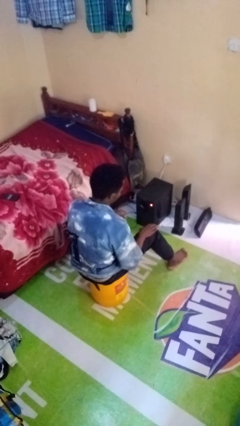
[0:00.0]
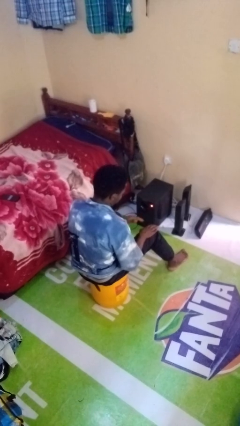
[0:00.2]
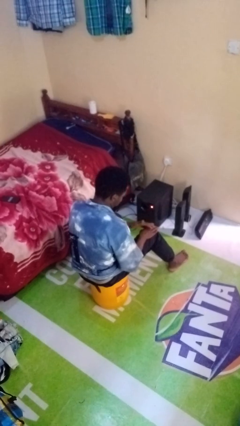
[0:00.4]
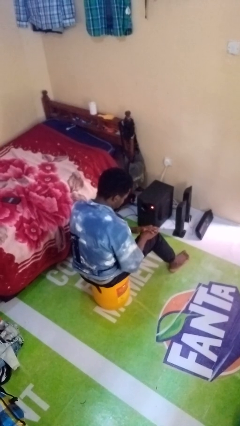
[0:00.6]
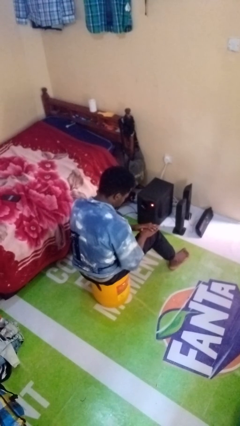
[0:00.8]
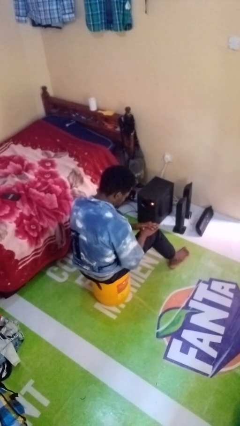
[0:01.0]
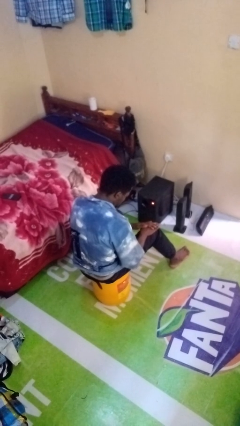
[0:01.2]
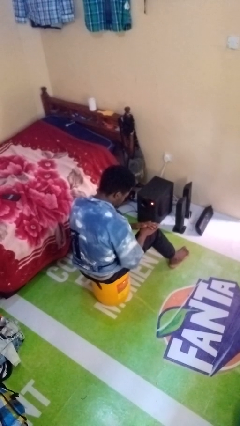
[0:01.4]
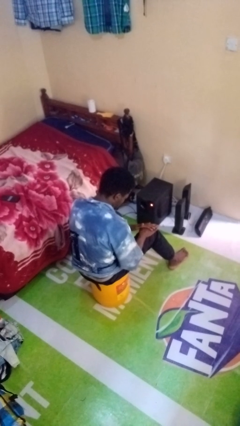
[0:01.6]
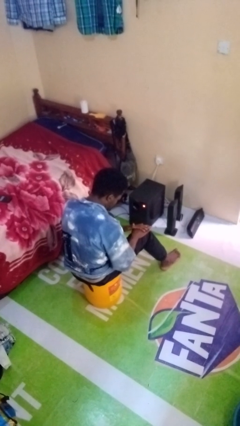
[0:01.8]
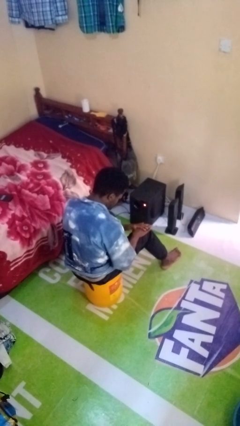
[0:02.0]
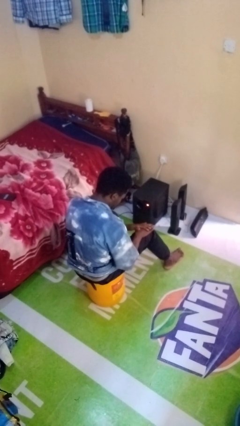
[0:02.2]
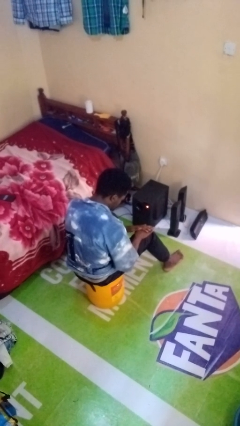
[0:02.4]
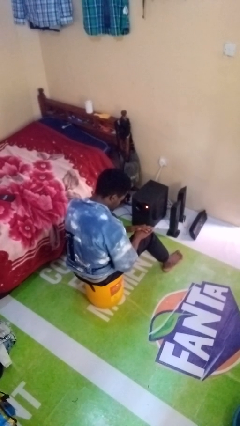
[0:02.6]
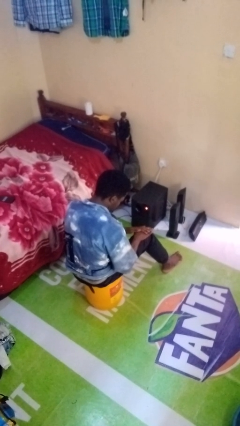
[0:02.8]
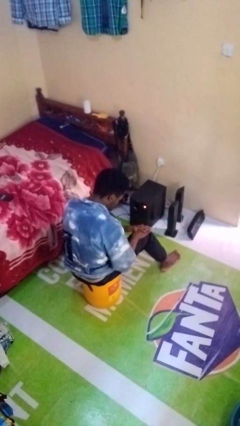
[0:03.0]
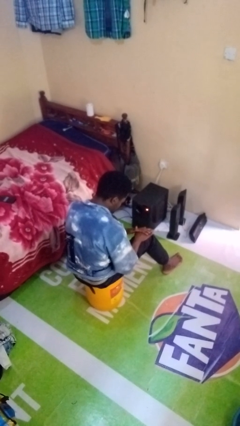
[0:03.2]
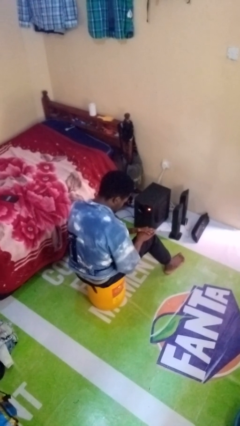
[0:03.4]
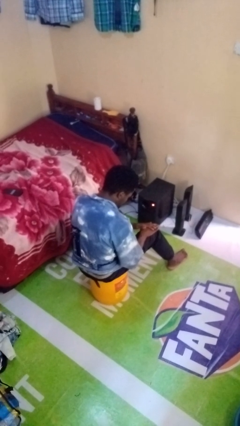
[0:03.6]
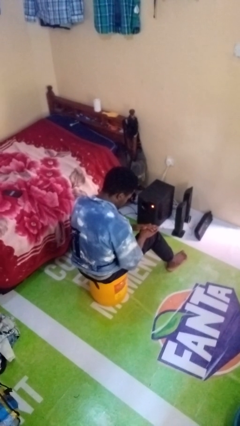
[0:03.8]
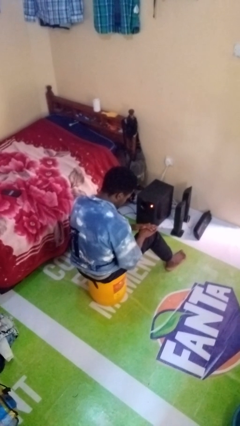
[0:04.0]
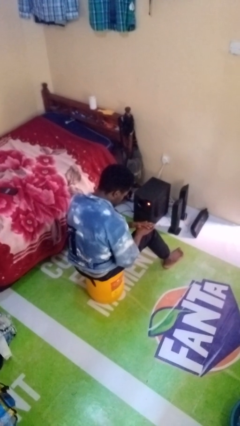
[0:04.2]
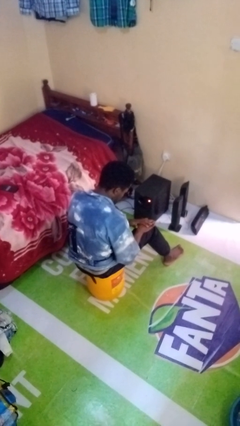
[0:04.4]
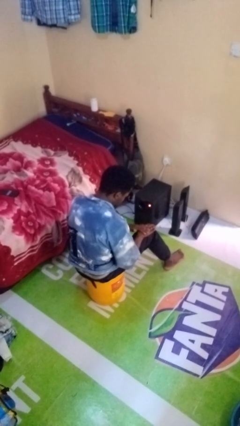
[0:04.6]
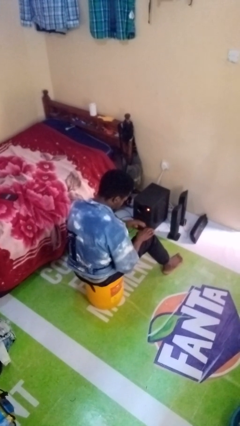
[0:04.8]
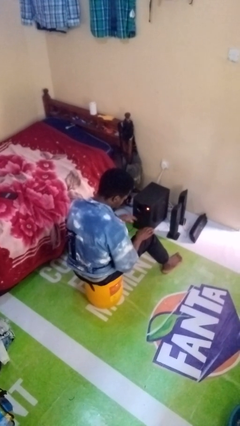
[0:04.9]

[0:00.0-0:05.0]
person looks at hands in lap

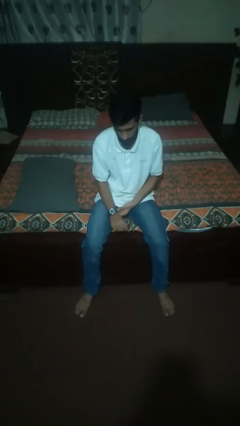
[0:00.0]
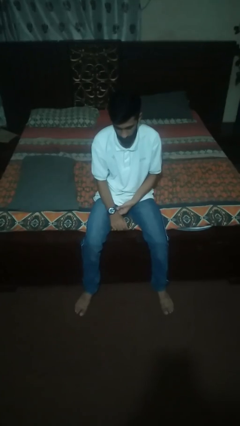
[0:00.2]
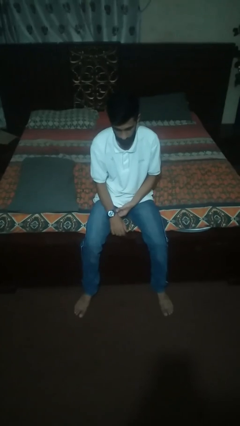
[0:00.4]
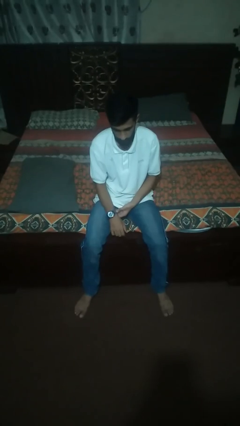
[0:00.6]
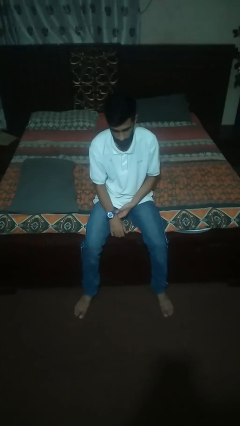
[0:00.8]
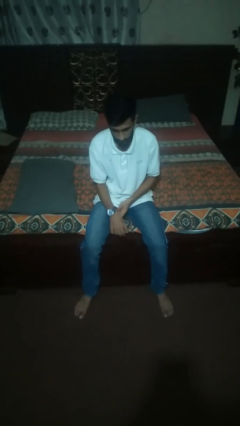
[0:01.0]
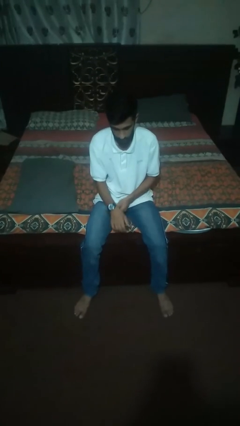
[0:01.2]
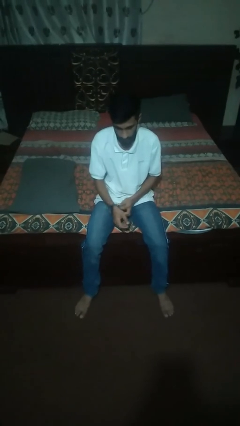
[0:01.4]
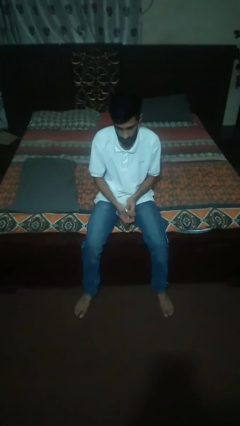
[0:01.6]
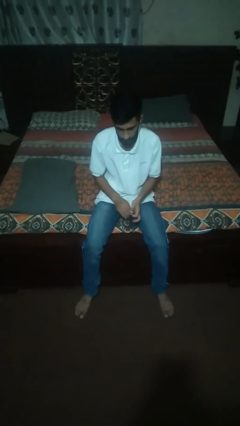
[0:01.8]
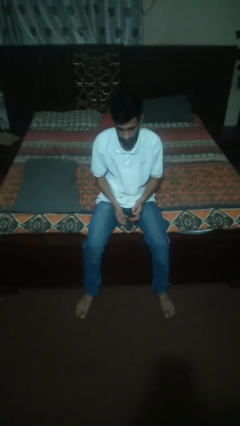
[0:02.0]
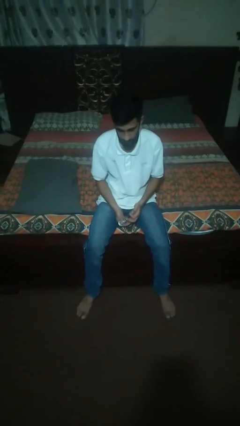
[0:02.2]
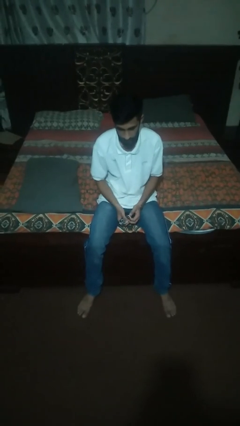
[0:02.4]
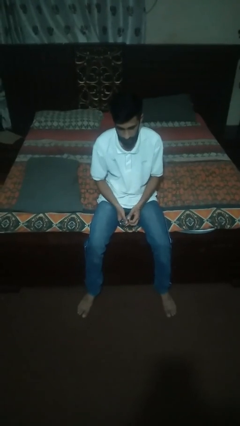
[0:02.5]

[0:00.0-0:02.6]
person takes off wristwatch

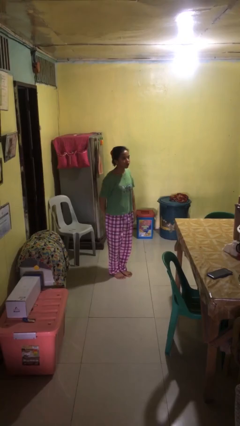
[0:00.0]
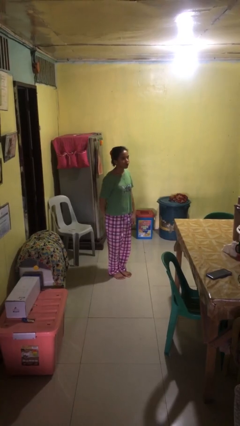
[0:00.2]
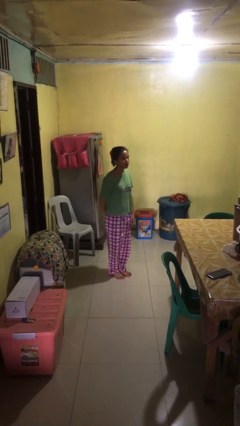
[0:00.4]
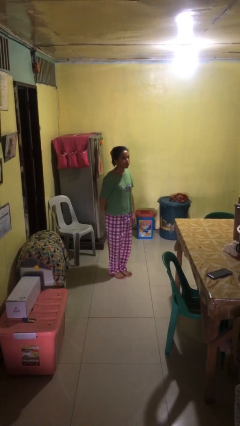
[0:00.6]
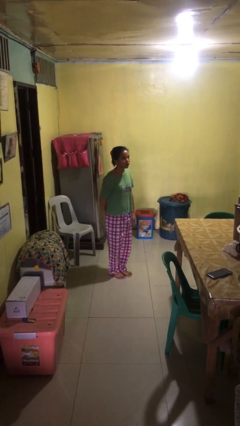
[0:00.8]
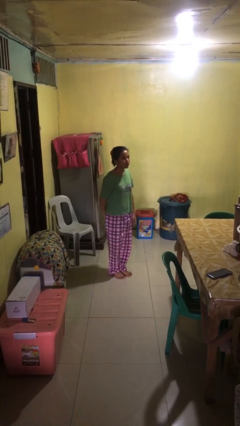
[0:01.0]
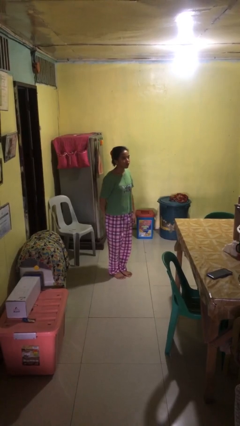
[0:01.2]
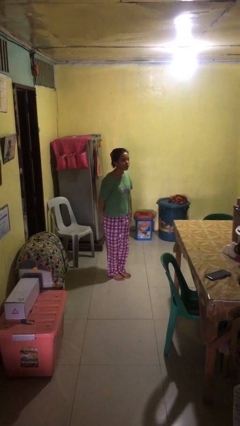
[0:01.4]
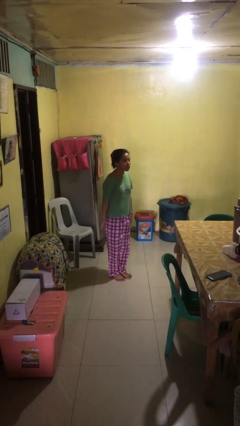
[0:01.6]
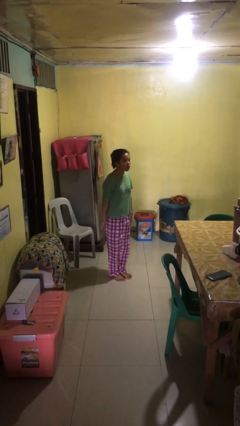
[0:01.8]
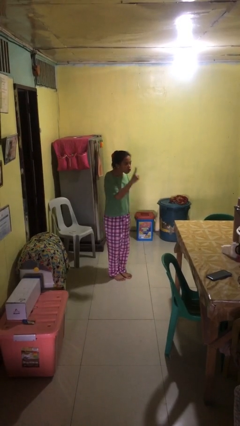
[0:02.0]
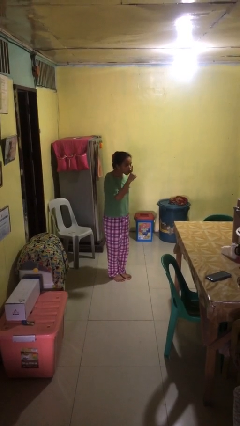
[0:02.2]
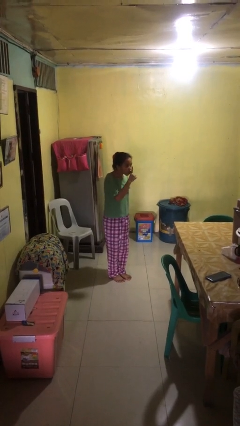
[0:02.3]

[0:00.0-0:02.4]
person gestures be quiet

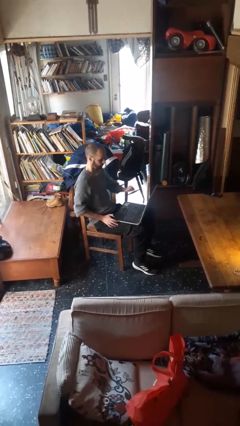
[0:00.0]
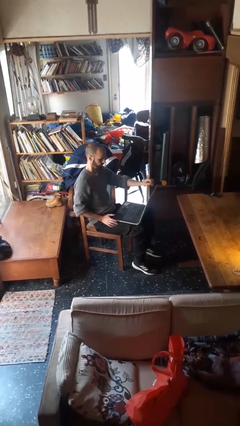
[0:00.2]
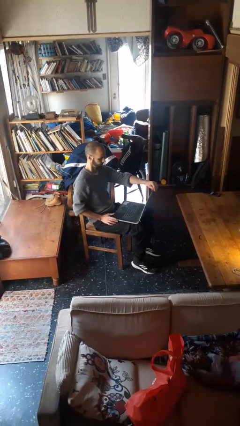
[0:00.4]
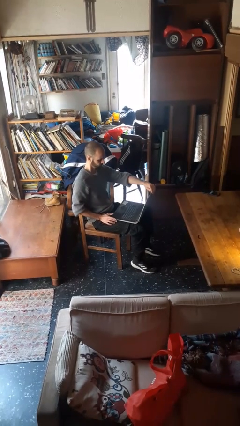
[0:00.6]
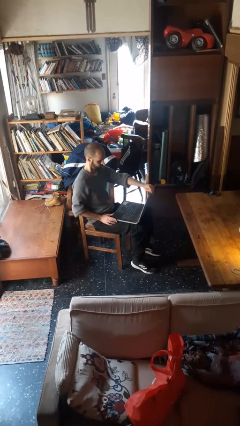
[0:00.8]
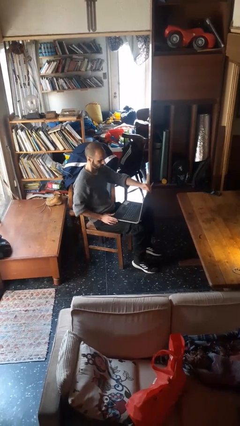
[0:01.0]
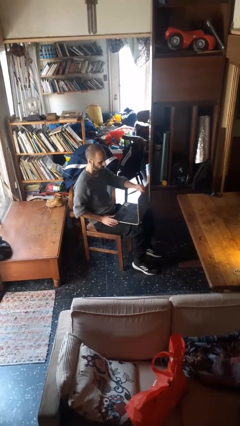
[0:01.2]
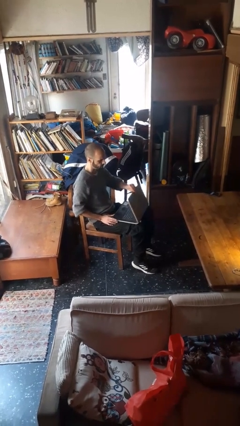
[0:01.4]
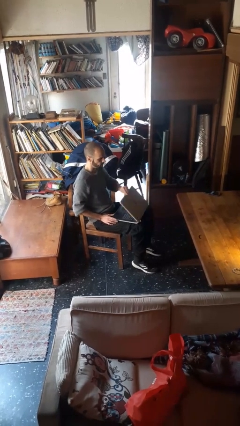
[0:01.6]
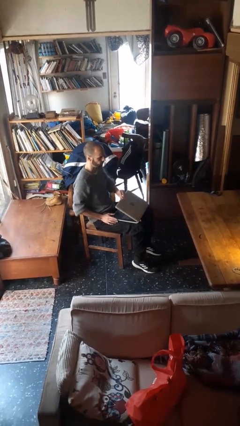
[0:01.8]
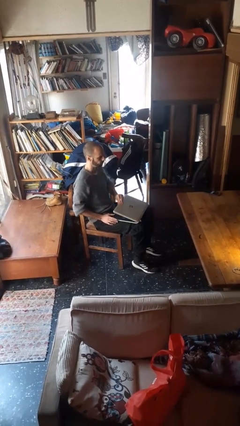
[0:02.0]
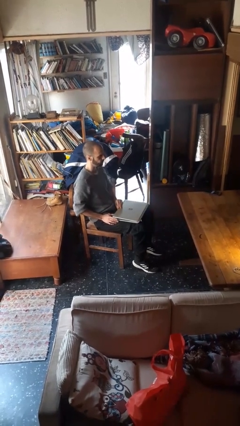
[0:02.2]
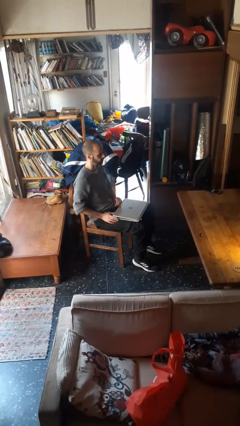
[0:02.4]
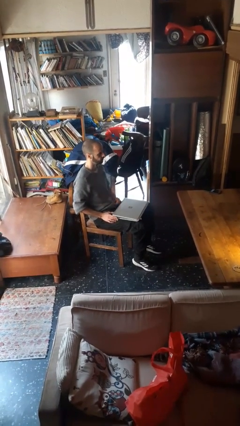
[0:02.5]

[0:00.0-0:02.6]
person closes laptop

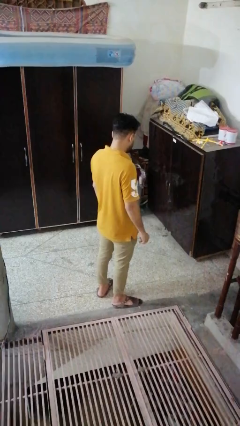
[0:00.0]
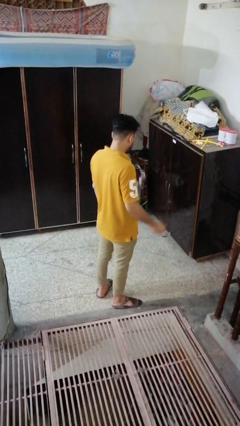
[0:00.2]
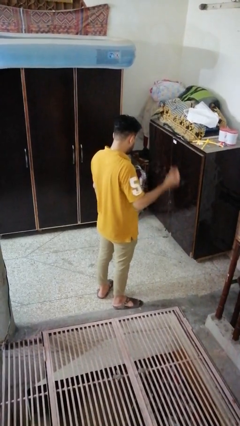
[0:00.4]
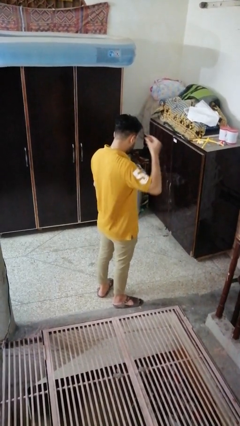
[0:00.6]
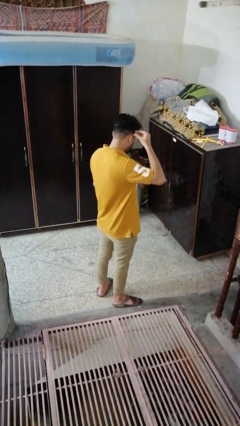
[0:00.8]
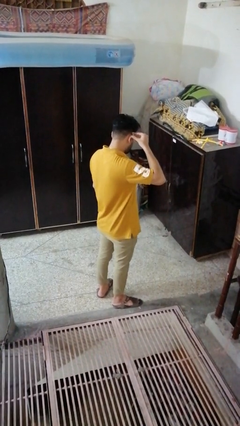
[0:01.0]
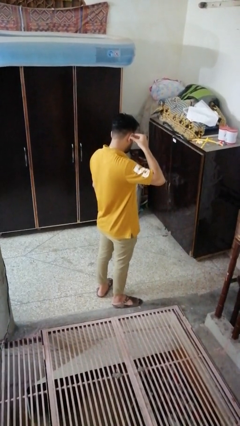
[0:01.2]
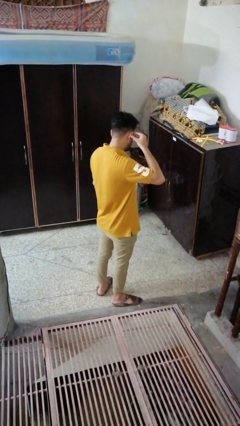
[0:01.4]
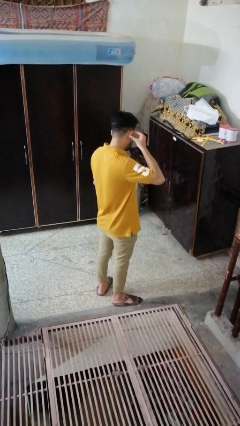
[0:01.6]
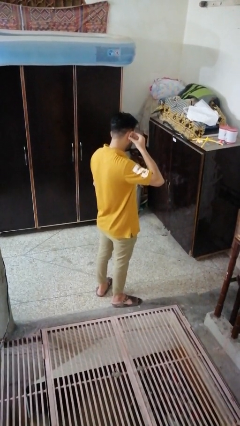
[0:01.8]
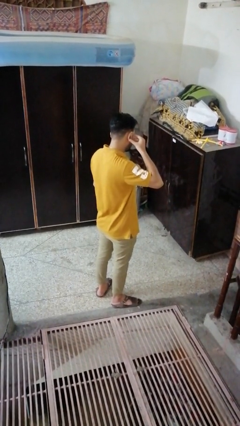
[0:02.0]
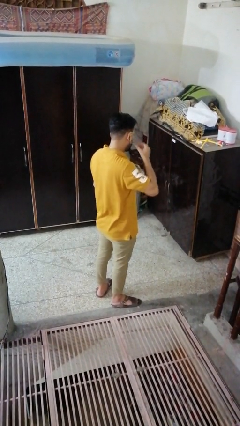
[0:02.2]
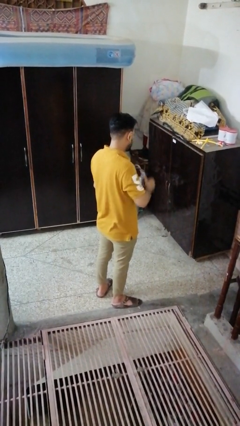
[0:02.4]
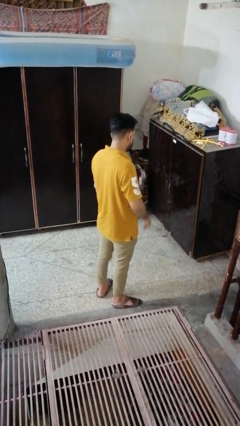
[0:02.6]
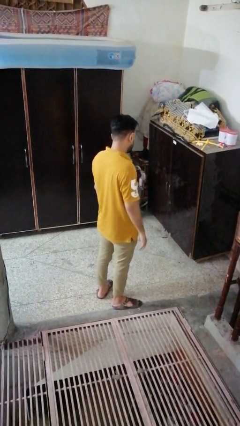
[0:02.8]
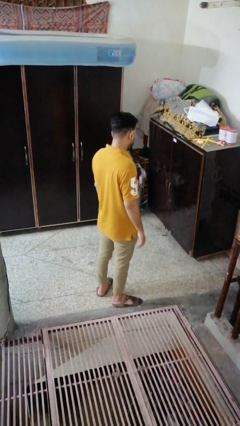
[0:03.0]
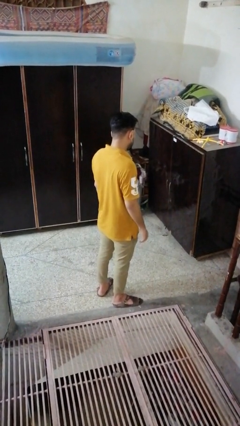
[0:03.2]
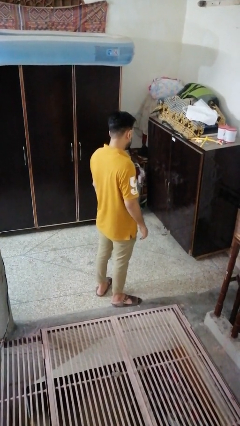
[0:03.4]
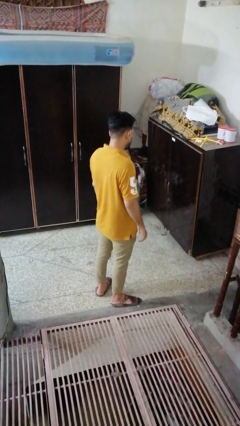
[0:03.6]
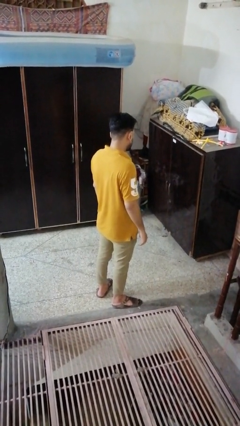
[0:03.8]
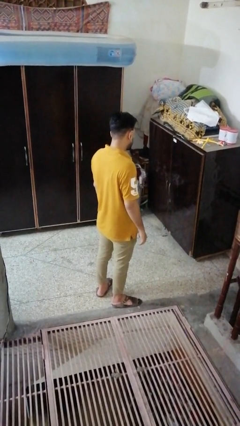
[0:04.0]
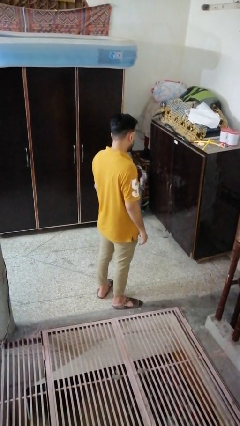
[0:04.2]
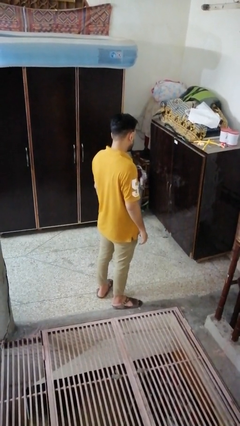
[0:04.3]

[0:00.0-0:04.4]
person puts on earrings

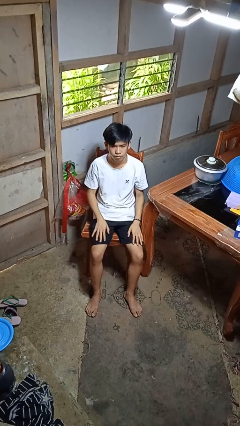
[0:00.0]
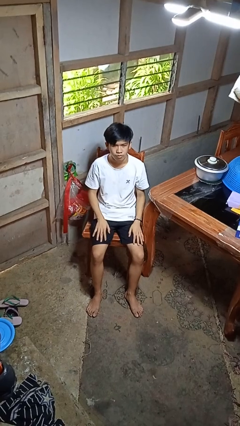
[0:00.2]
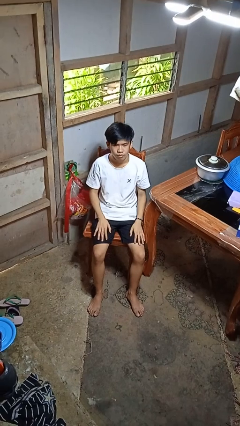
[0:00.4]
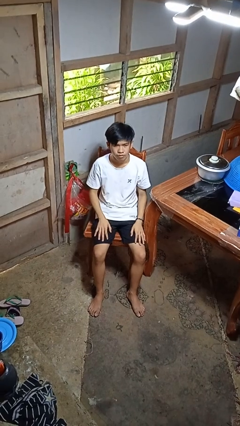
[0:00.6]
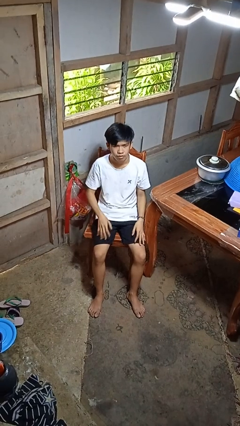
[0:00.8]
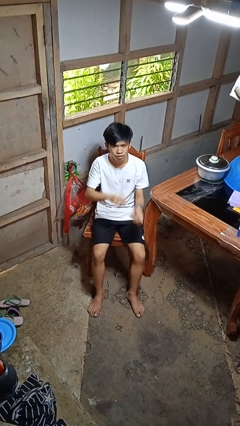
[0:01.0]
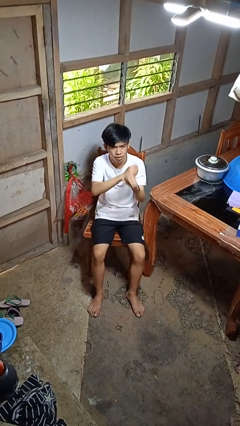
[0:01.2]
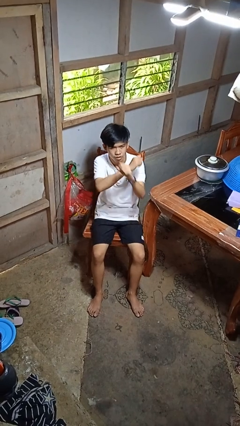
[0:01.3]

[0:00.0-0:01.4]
person gestures arms x
